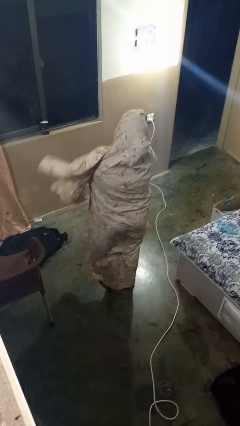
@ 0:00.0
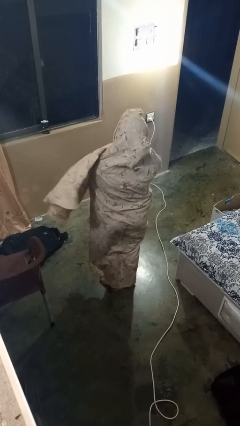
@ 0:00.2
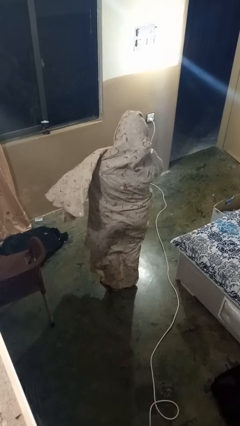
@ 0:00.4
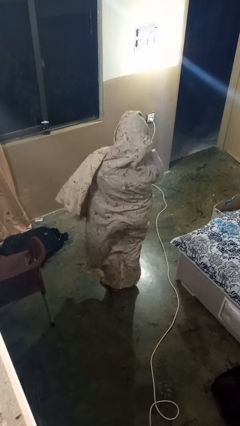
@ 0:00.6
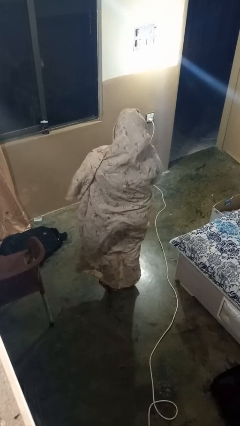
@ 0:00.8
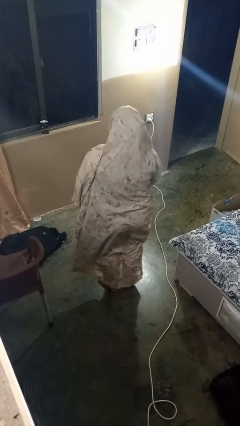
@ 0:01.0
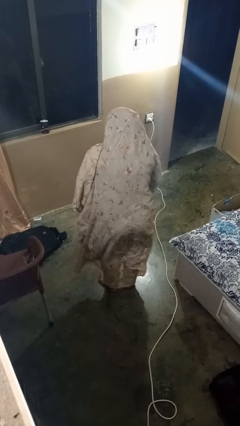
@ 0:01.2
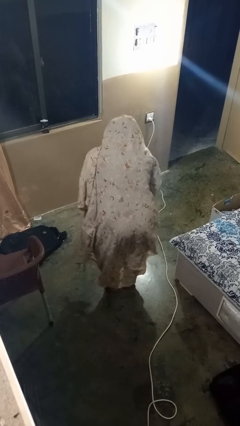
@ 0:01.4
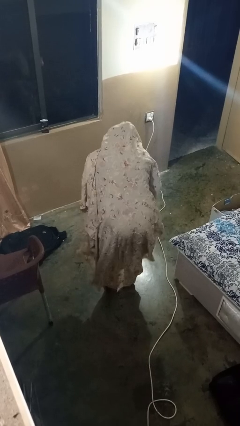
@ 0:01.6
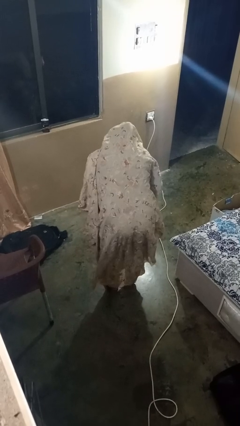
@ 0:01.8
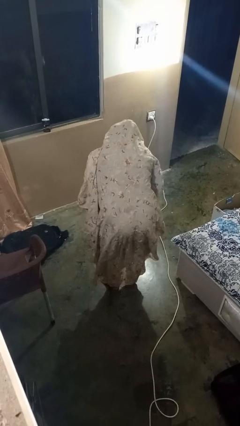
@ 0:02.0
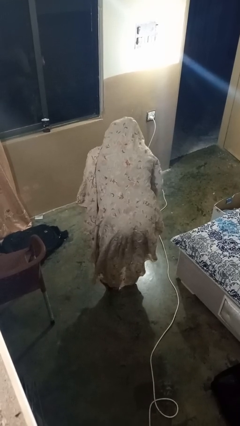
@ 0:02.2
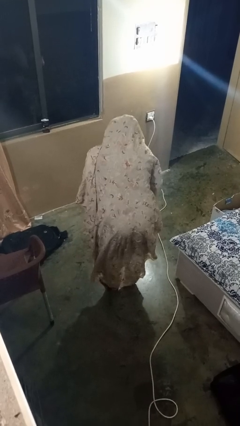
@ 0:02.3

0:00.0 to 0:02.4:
person bows

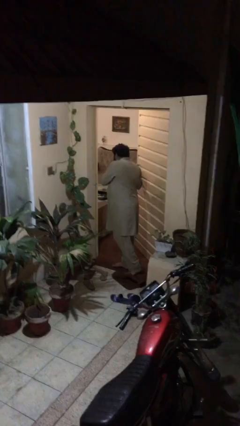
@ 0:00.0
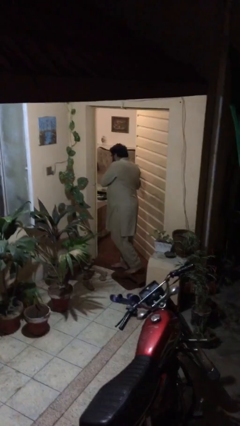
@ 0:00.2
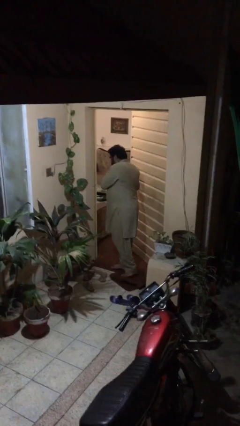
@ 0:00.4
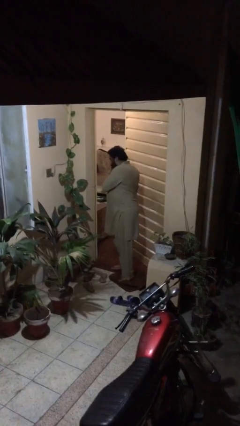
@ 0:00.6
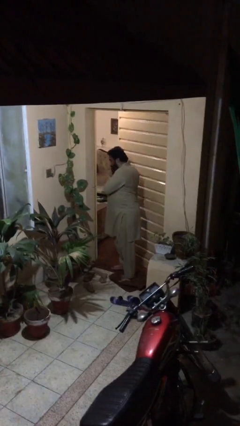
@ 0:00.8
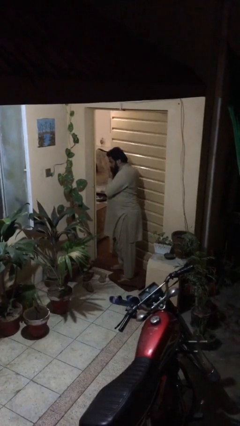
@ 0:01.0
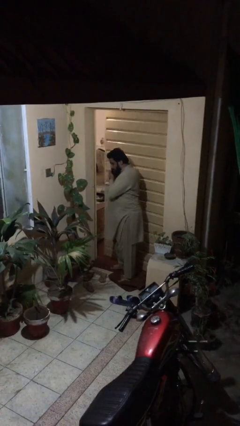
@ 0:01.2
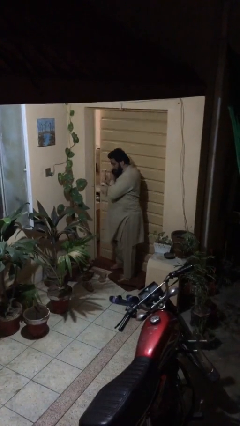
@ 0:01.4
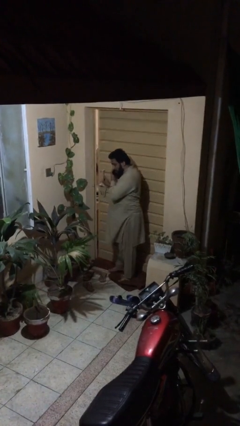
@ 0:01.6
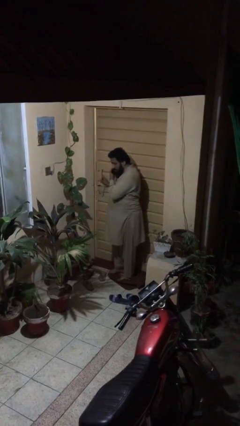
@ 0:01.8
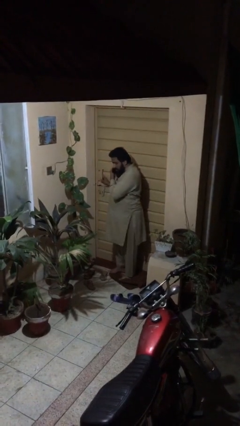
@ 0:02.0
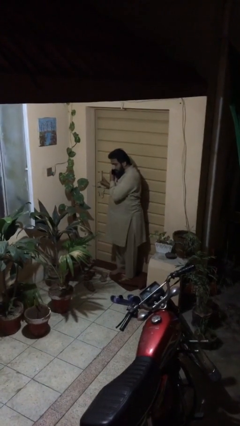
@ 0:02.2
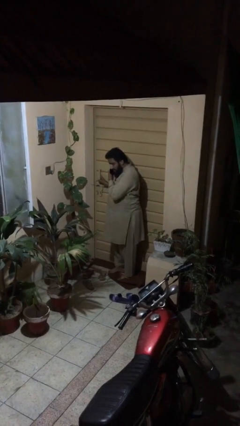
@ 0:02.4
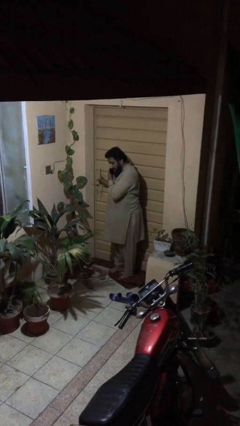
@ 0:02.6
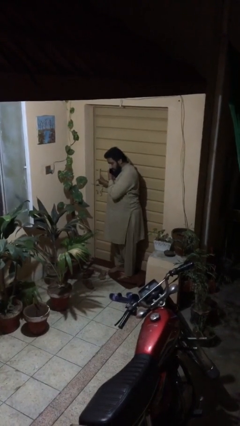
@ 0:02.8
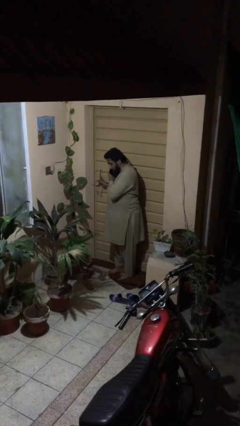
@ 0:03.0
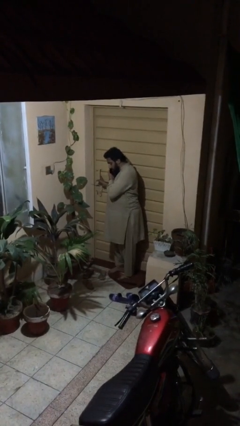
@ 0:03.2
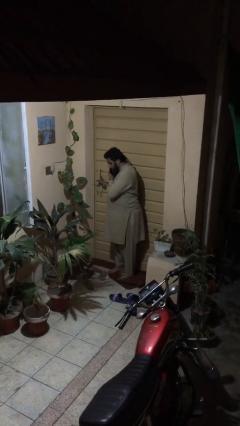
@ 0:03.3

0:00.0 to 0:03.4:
person closes facility door

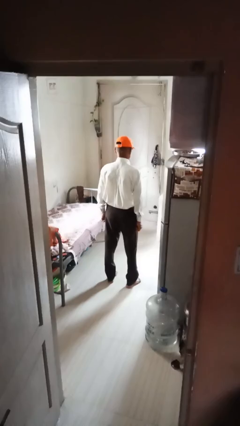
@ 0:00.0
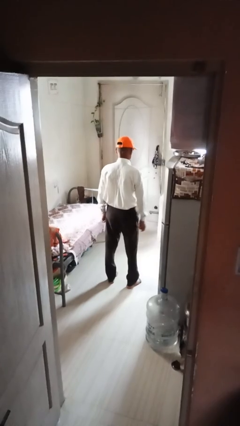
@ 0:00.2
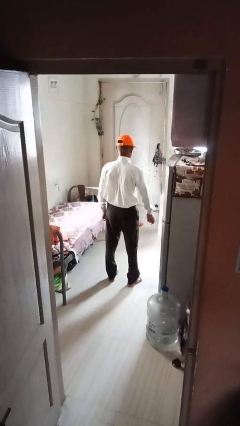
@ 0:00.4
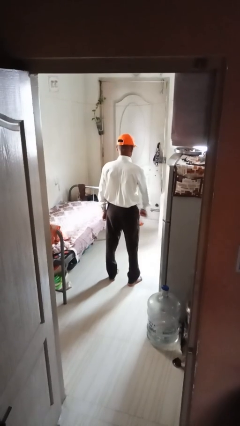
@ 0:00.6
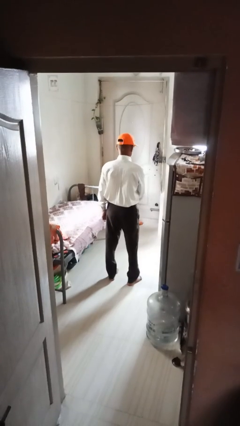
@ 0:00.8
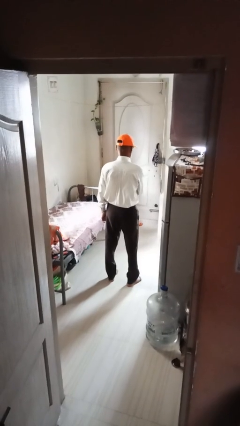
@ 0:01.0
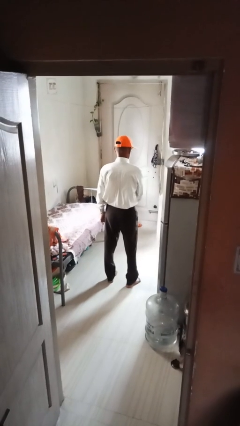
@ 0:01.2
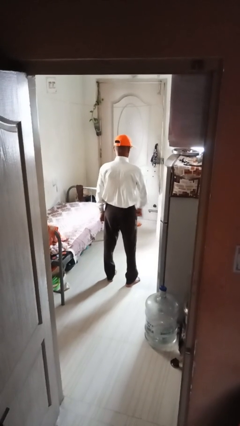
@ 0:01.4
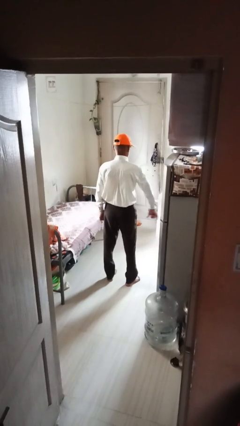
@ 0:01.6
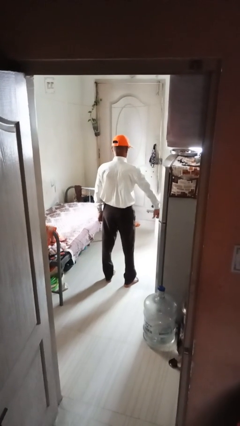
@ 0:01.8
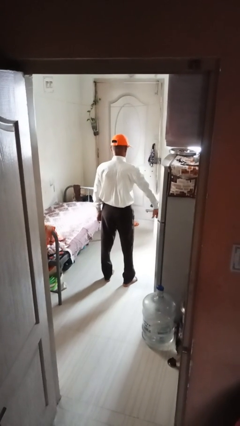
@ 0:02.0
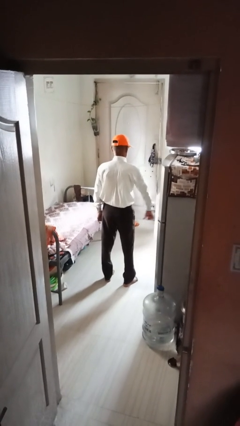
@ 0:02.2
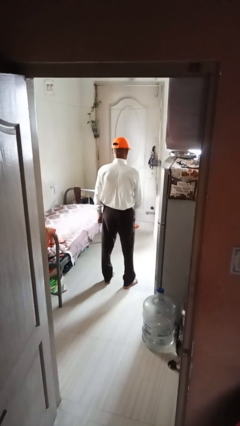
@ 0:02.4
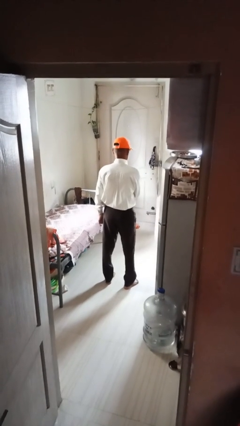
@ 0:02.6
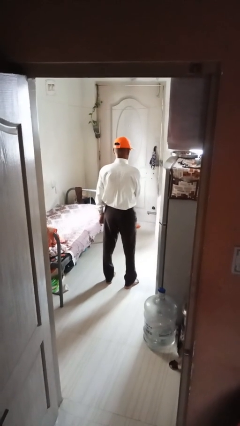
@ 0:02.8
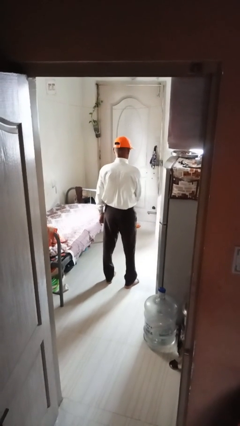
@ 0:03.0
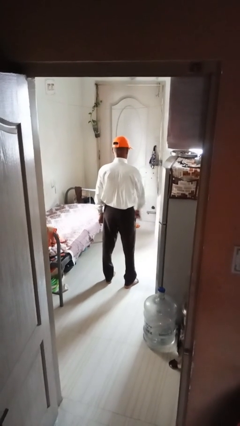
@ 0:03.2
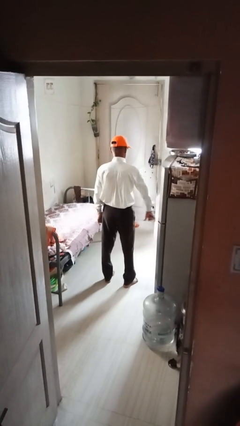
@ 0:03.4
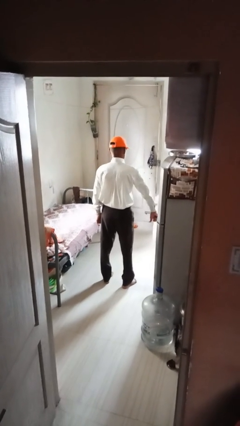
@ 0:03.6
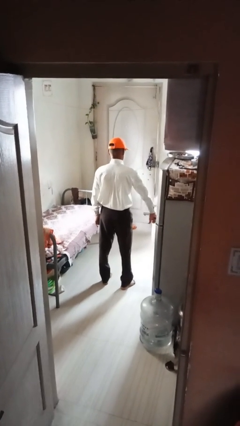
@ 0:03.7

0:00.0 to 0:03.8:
person gestures hang loose

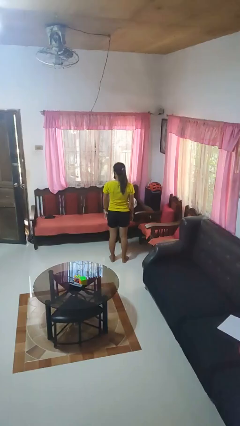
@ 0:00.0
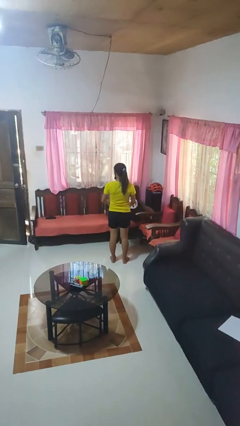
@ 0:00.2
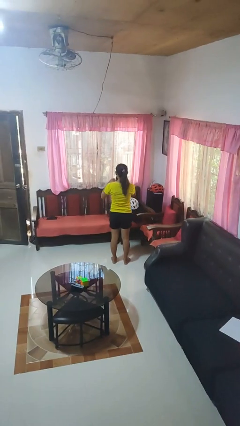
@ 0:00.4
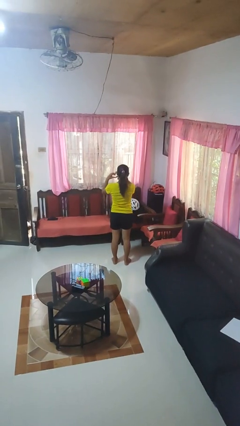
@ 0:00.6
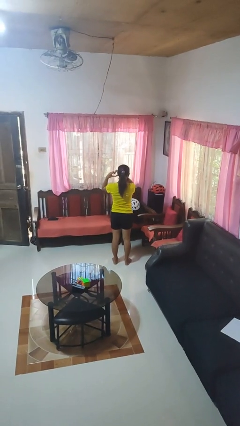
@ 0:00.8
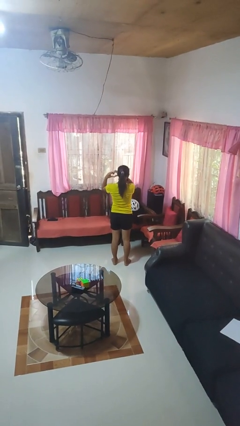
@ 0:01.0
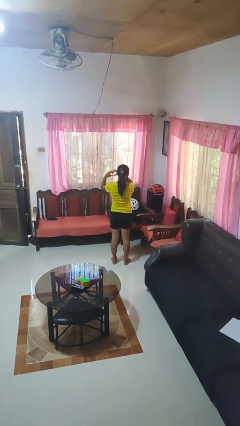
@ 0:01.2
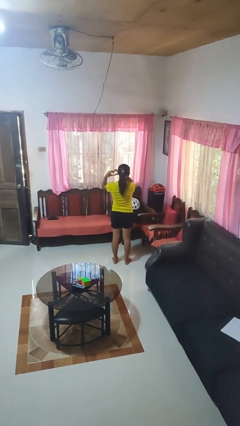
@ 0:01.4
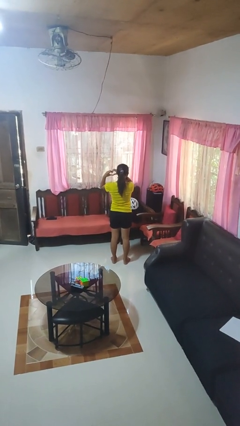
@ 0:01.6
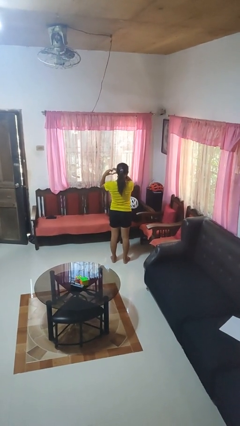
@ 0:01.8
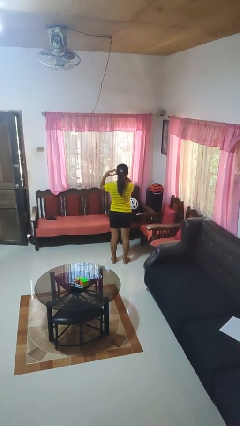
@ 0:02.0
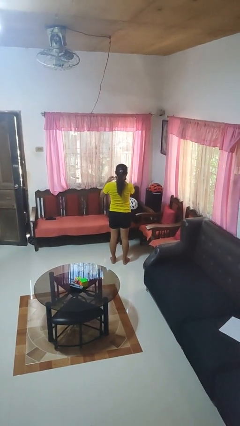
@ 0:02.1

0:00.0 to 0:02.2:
person gestures heart

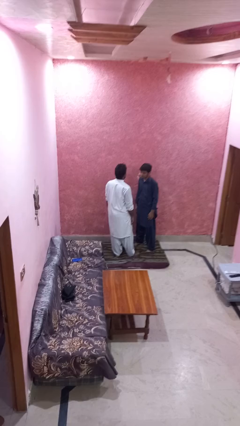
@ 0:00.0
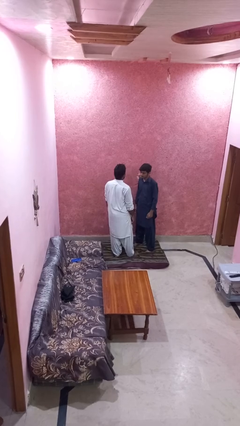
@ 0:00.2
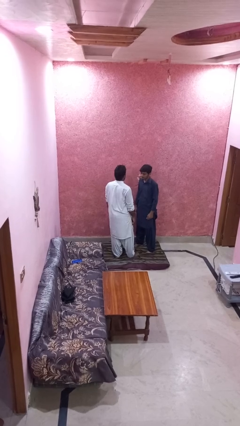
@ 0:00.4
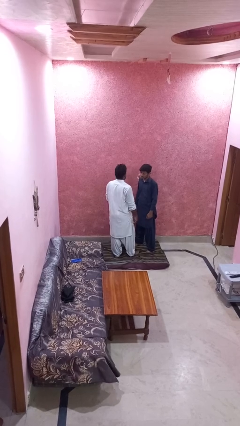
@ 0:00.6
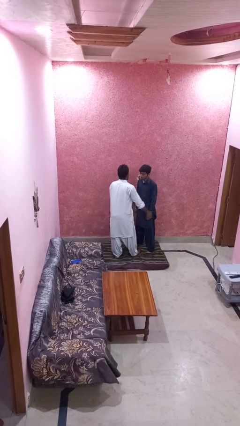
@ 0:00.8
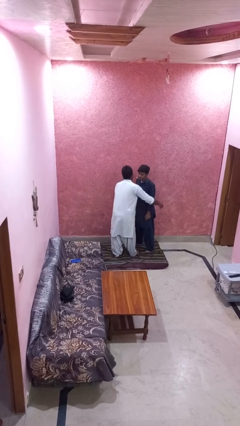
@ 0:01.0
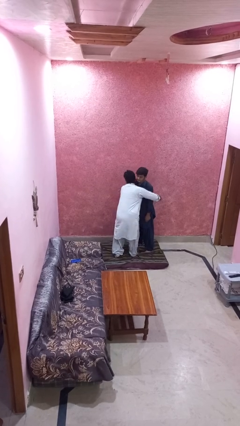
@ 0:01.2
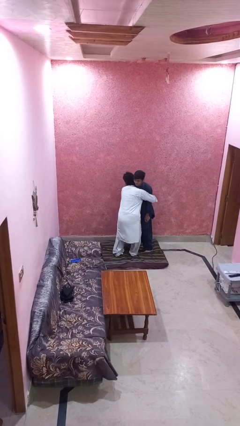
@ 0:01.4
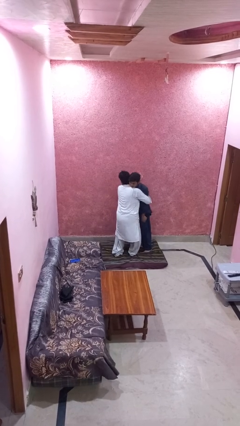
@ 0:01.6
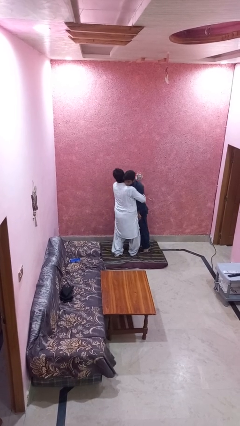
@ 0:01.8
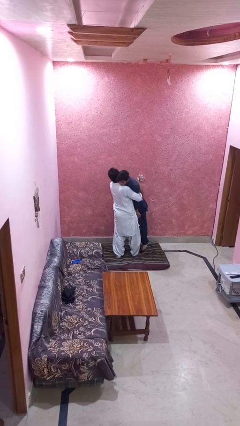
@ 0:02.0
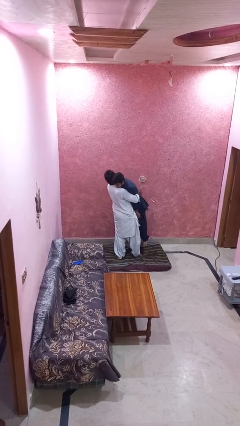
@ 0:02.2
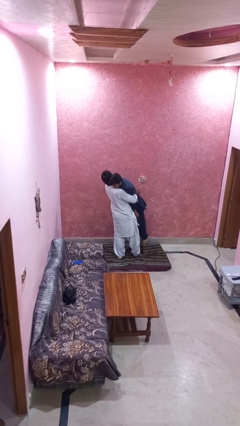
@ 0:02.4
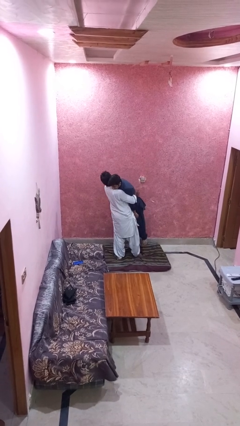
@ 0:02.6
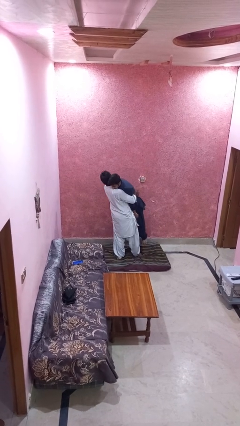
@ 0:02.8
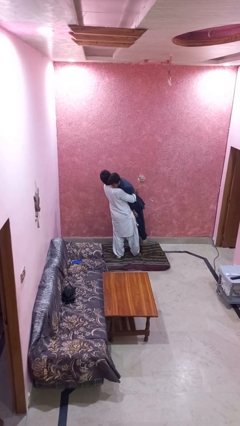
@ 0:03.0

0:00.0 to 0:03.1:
person picks up person

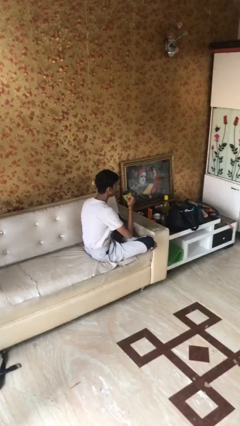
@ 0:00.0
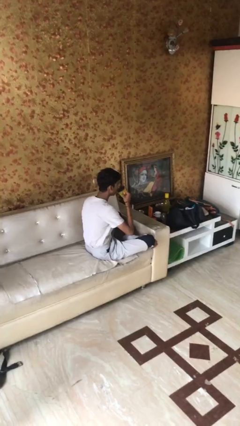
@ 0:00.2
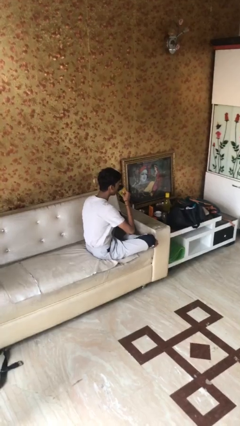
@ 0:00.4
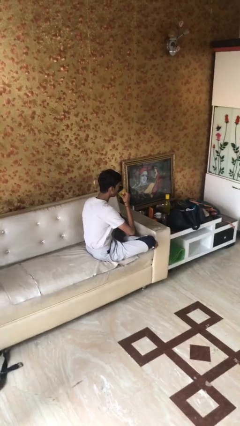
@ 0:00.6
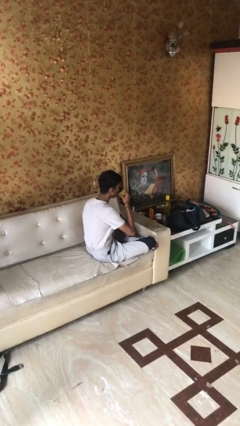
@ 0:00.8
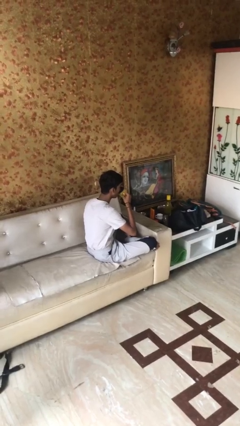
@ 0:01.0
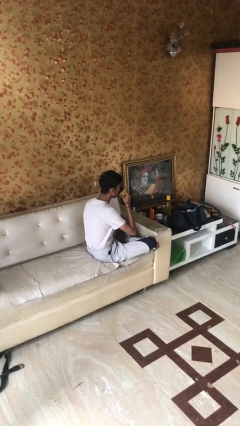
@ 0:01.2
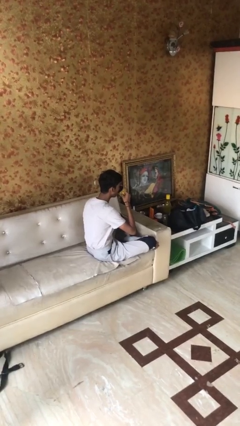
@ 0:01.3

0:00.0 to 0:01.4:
person drinks from mug

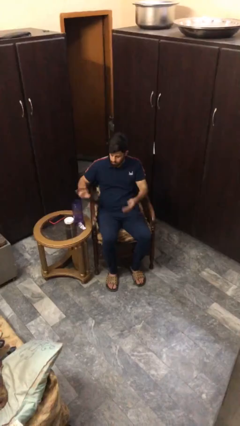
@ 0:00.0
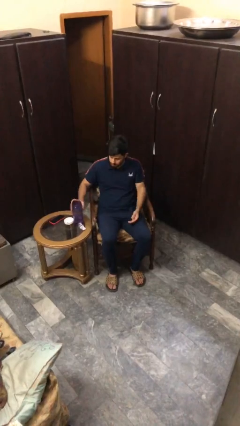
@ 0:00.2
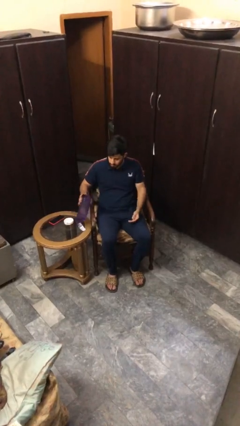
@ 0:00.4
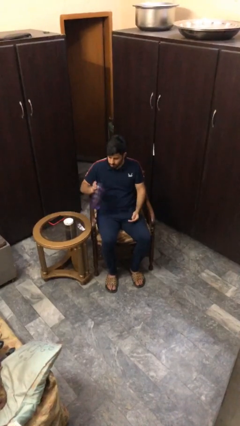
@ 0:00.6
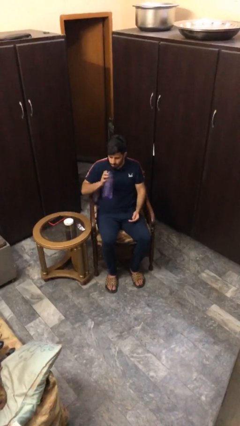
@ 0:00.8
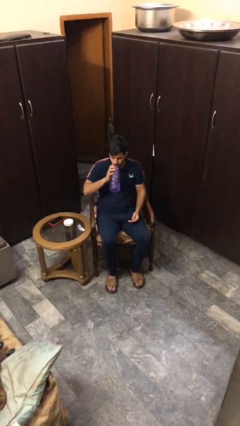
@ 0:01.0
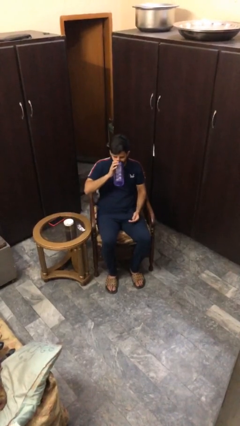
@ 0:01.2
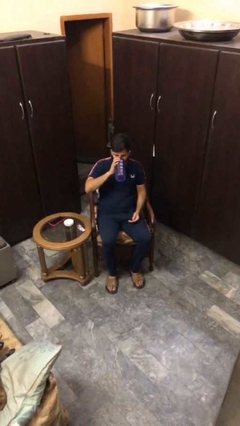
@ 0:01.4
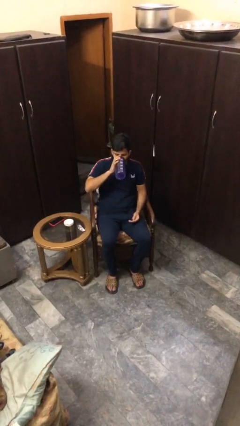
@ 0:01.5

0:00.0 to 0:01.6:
person drinks from cup
